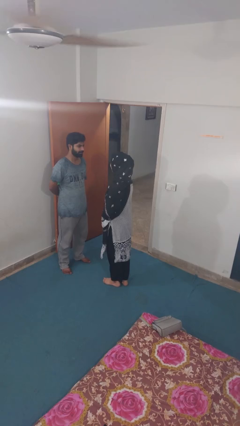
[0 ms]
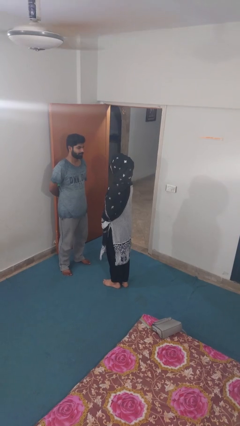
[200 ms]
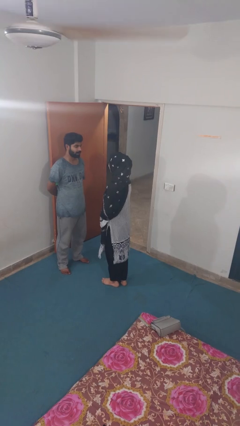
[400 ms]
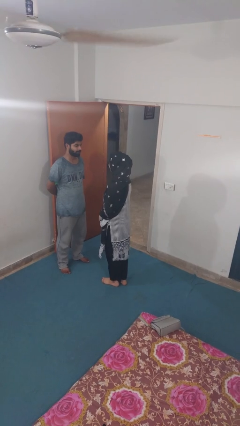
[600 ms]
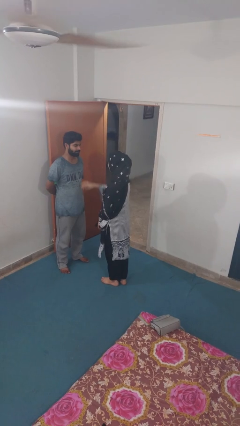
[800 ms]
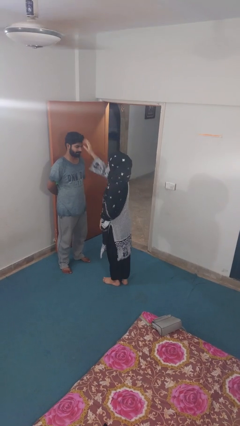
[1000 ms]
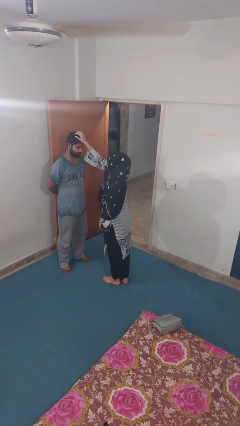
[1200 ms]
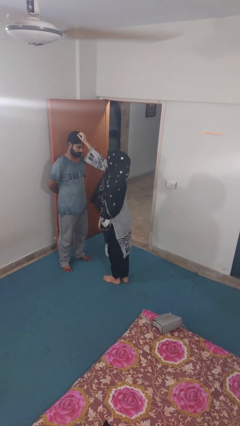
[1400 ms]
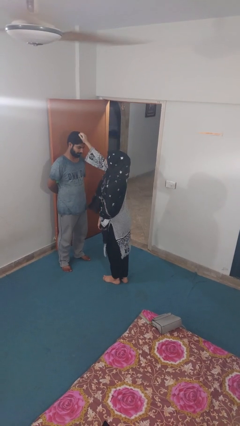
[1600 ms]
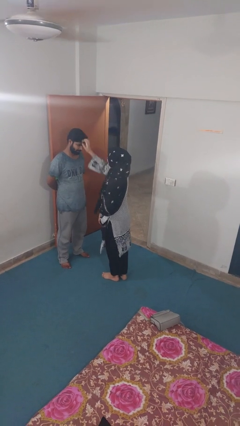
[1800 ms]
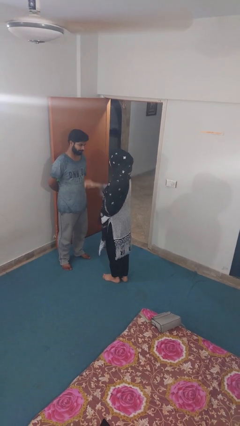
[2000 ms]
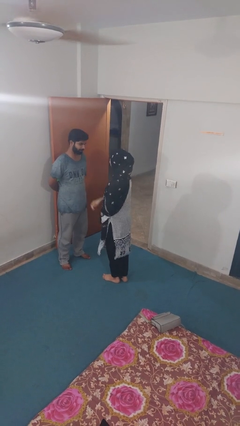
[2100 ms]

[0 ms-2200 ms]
person grabs person by hair

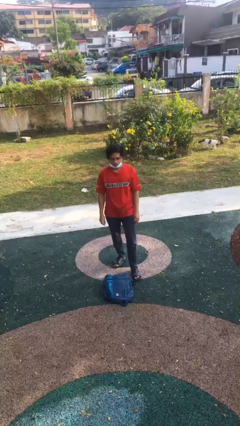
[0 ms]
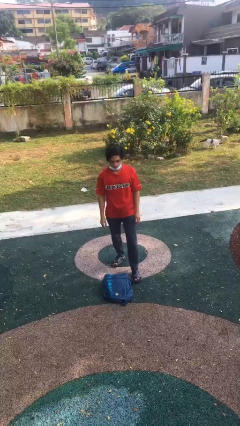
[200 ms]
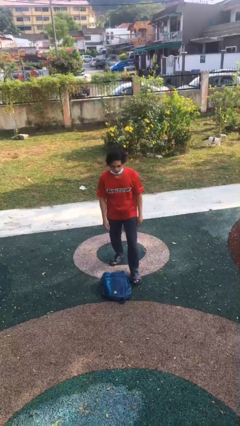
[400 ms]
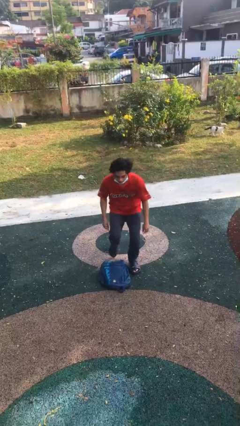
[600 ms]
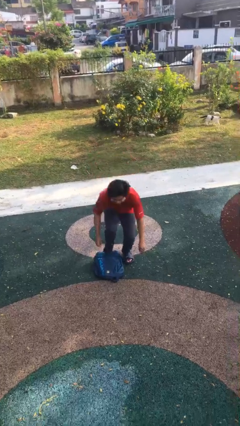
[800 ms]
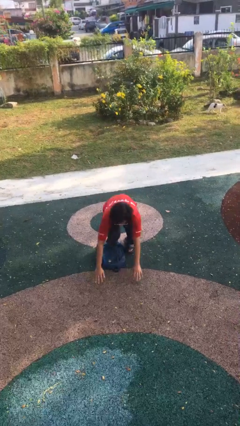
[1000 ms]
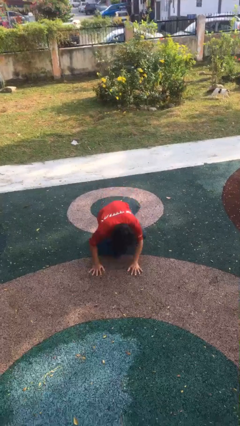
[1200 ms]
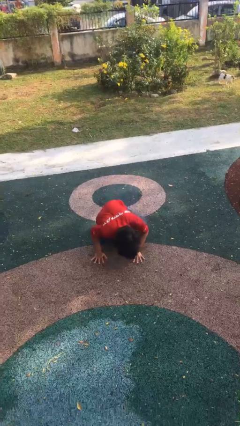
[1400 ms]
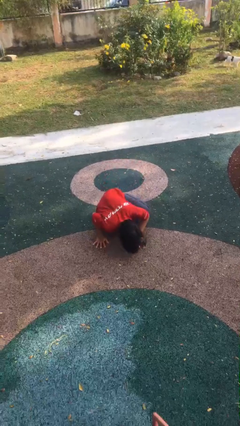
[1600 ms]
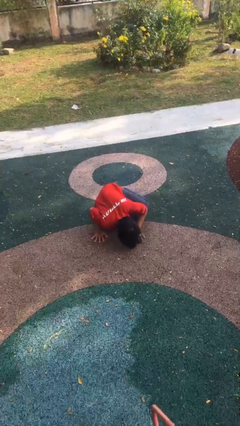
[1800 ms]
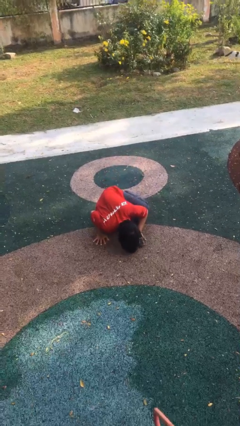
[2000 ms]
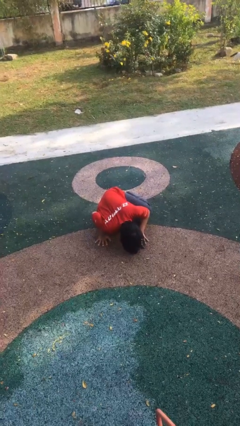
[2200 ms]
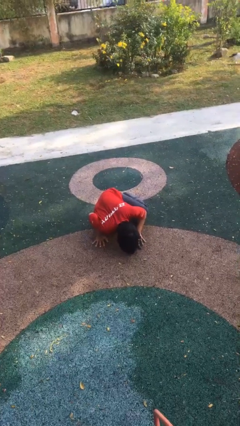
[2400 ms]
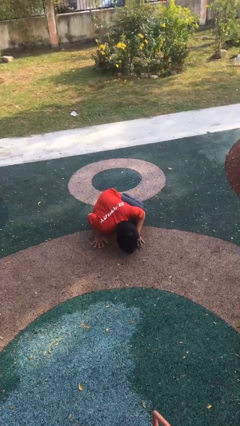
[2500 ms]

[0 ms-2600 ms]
person trips on object on floor

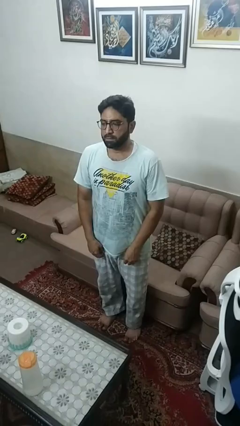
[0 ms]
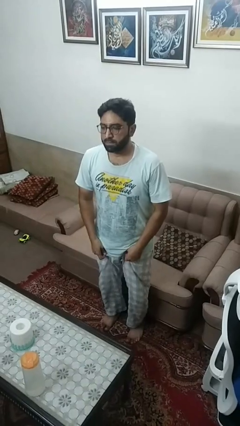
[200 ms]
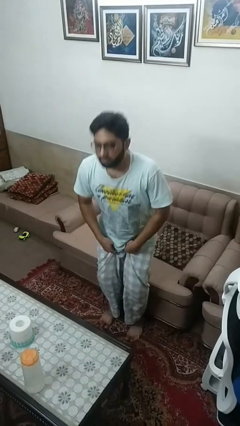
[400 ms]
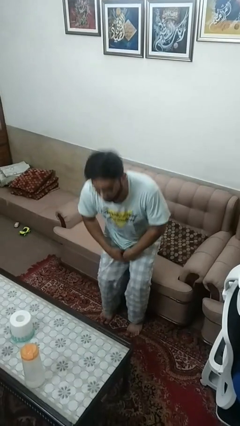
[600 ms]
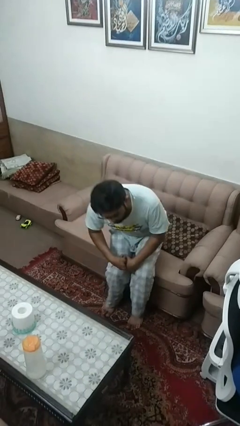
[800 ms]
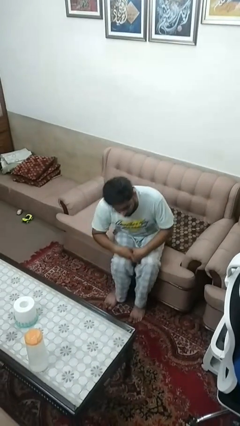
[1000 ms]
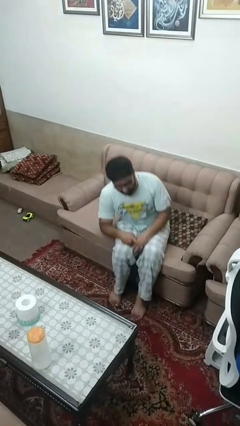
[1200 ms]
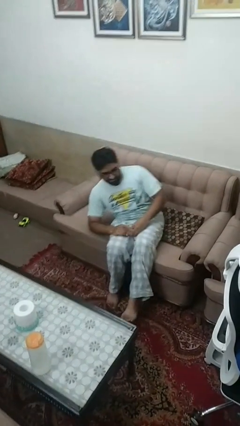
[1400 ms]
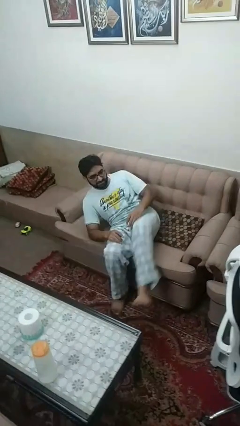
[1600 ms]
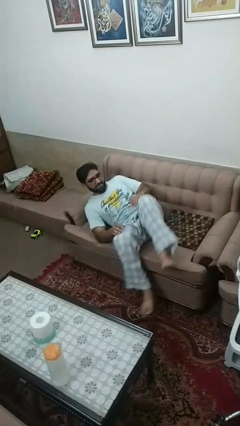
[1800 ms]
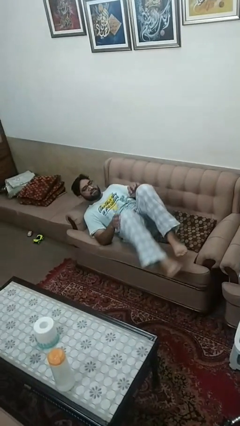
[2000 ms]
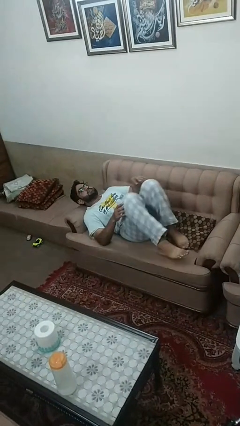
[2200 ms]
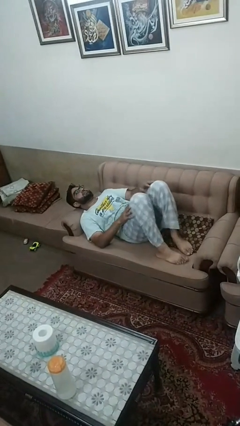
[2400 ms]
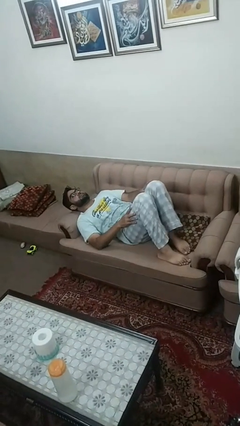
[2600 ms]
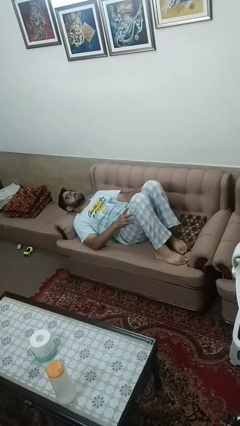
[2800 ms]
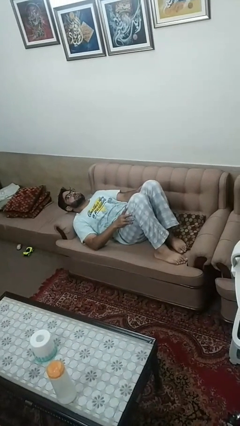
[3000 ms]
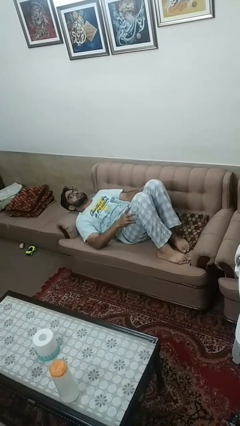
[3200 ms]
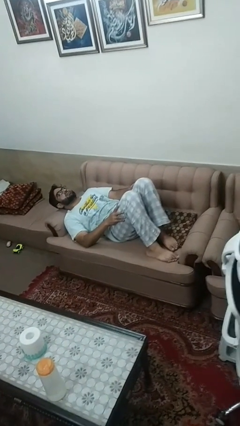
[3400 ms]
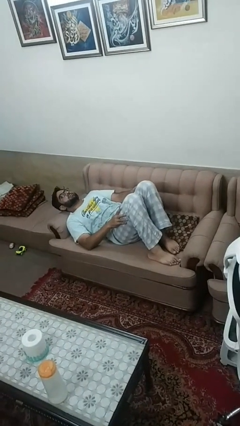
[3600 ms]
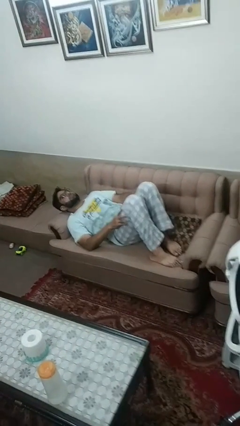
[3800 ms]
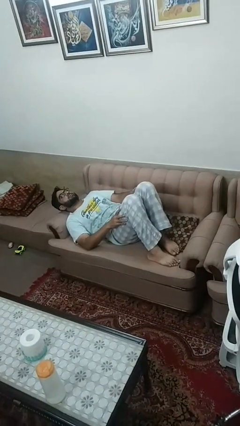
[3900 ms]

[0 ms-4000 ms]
person lies down on couch

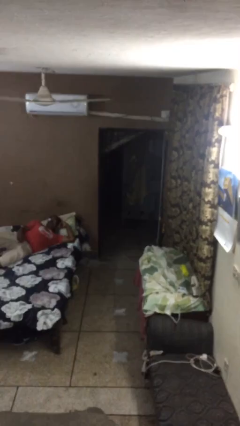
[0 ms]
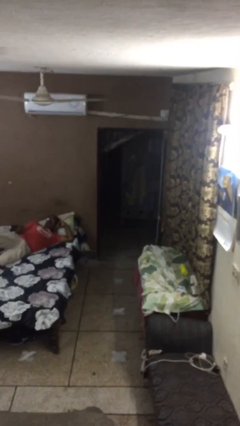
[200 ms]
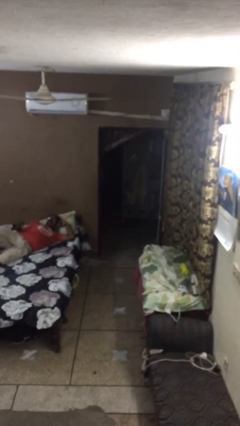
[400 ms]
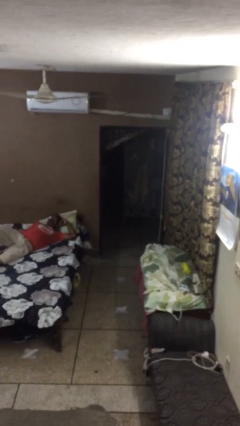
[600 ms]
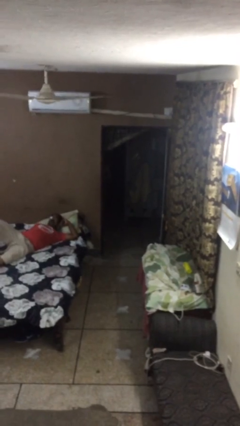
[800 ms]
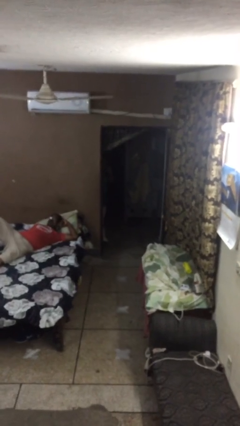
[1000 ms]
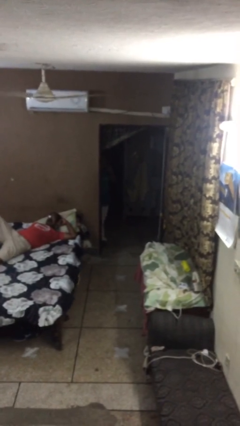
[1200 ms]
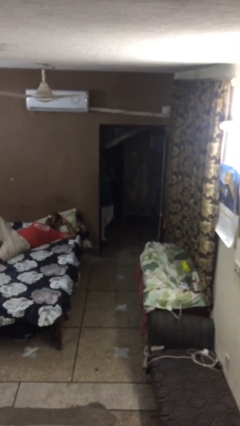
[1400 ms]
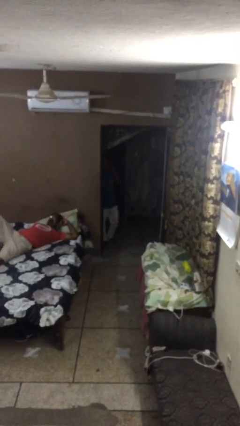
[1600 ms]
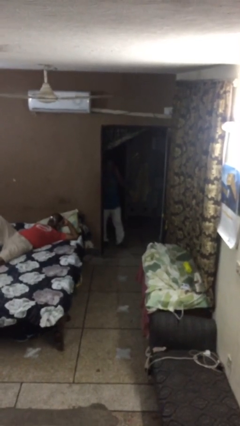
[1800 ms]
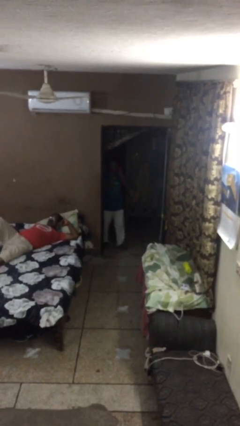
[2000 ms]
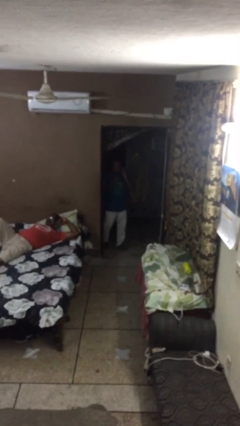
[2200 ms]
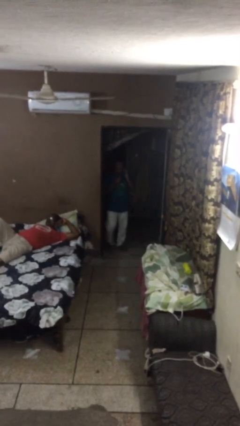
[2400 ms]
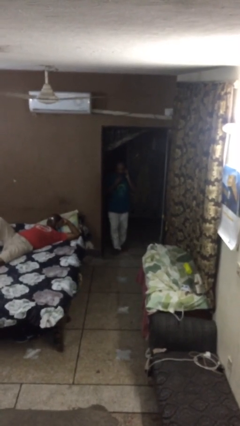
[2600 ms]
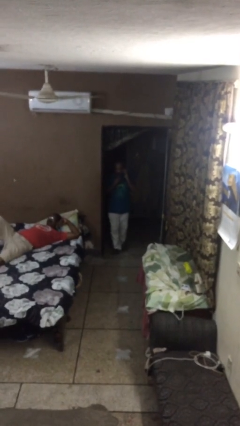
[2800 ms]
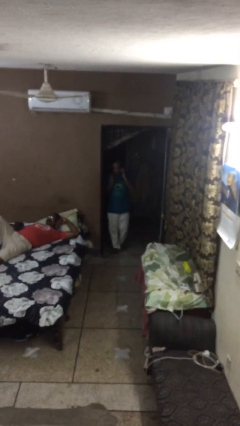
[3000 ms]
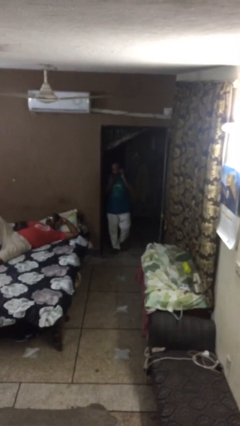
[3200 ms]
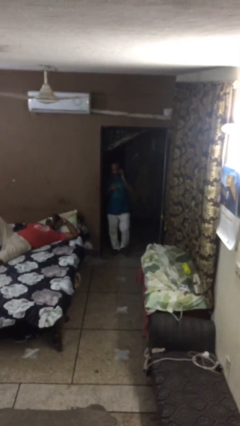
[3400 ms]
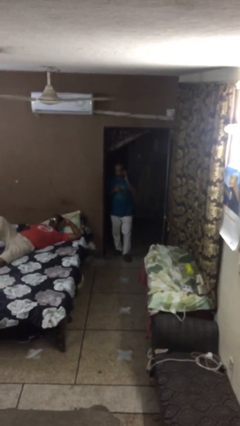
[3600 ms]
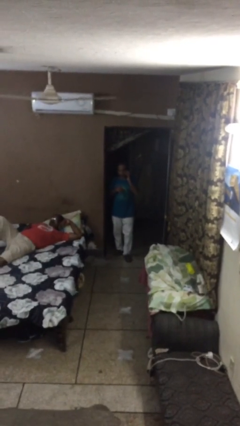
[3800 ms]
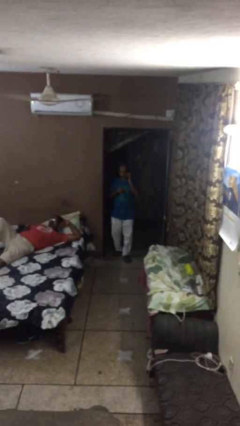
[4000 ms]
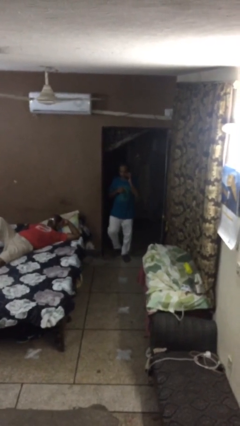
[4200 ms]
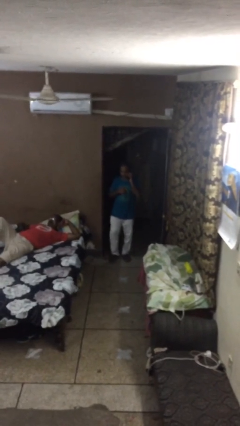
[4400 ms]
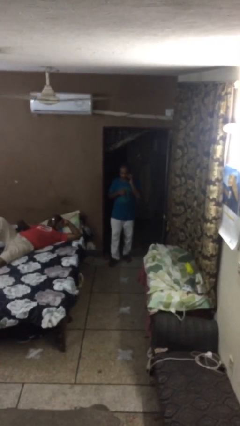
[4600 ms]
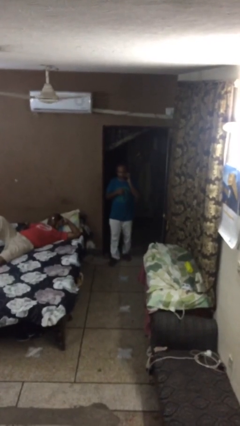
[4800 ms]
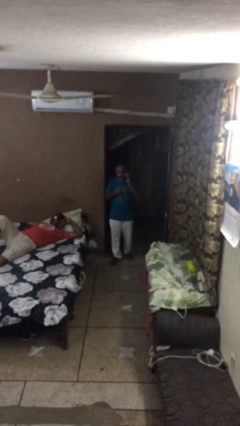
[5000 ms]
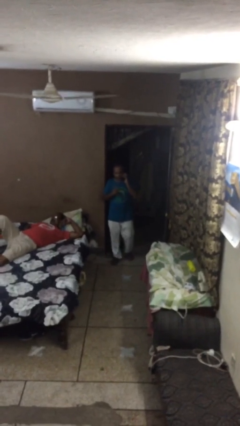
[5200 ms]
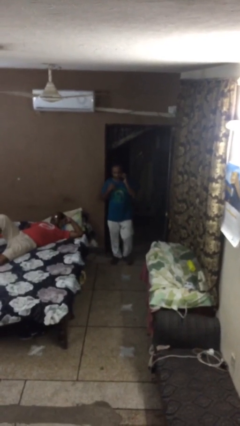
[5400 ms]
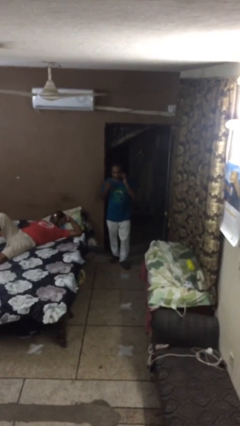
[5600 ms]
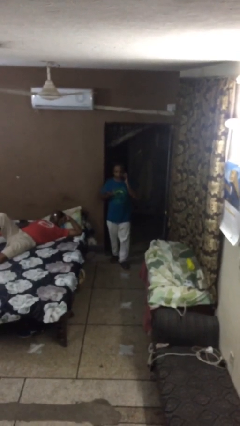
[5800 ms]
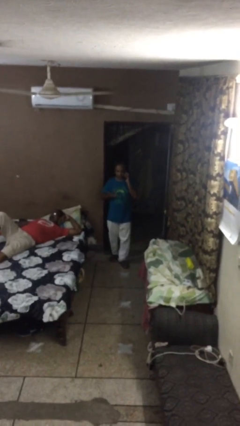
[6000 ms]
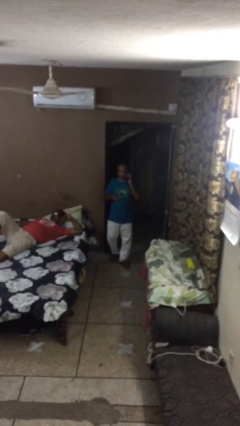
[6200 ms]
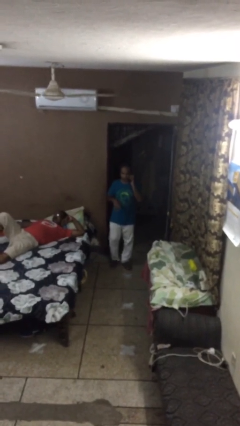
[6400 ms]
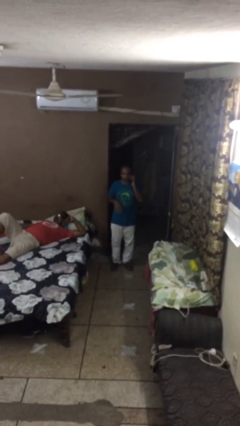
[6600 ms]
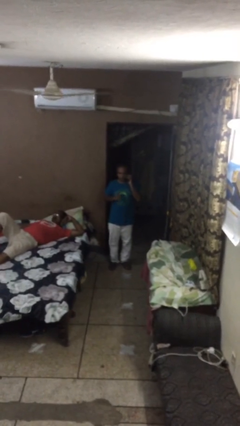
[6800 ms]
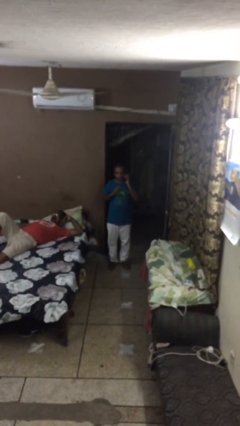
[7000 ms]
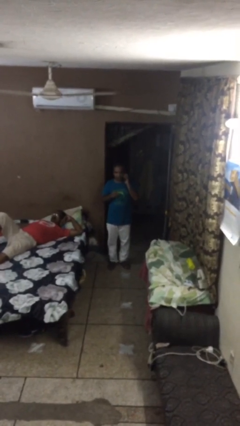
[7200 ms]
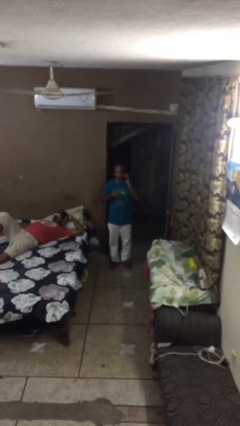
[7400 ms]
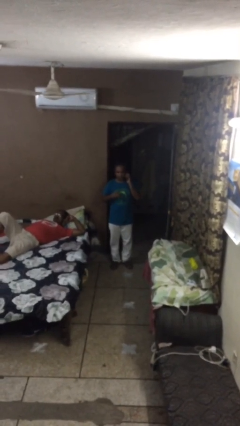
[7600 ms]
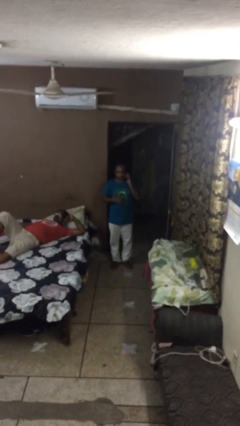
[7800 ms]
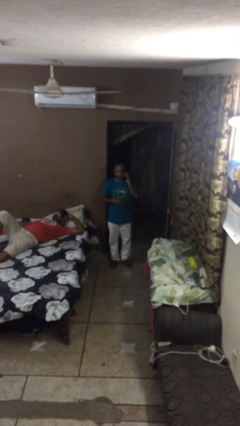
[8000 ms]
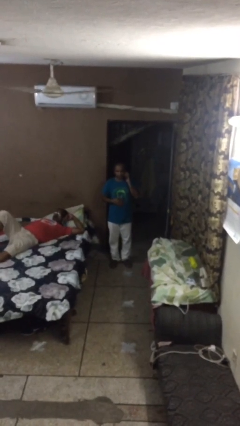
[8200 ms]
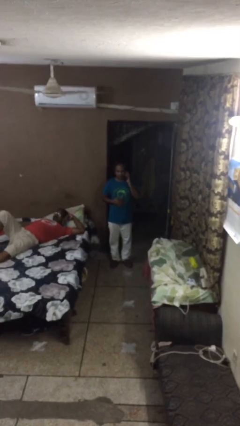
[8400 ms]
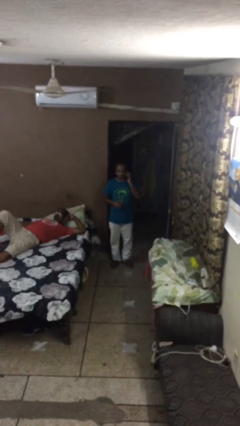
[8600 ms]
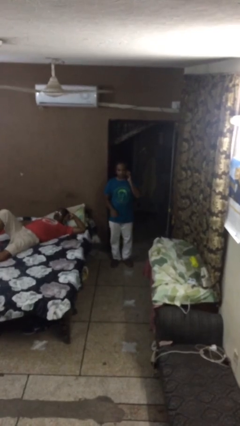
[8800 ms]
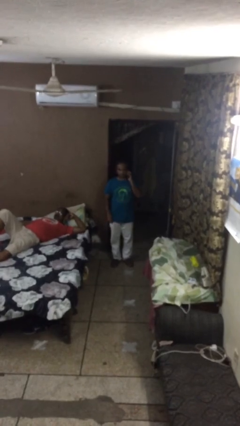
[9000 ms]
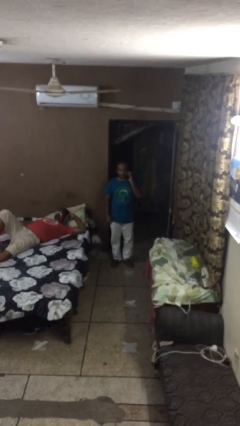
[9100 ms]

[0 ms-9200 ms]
person enters scene through structure
